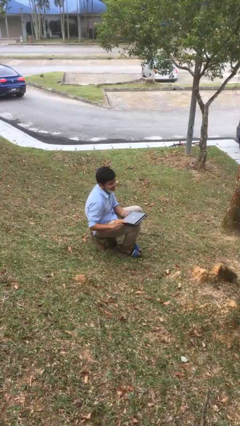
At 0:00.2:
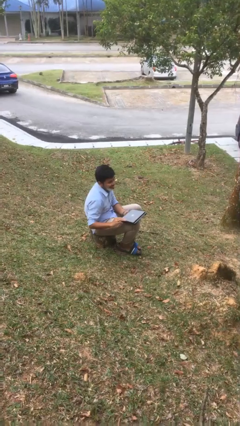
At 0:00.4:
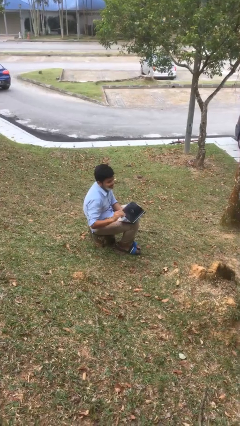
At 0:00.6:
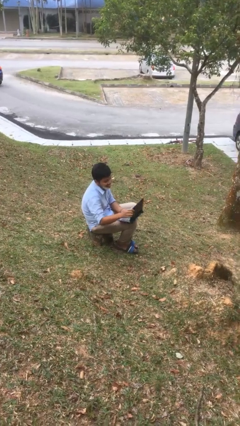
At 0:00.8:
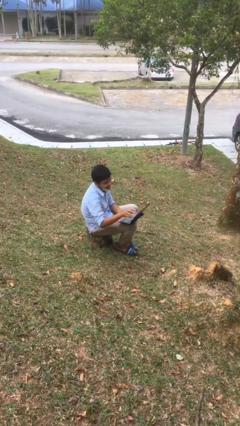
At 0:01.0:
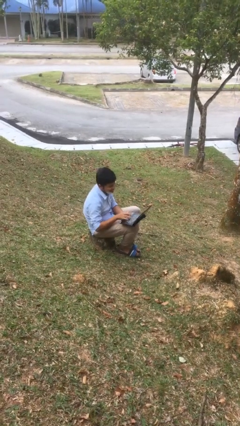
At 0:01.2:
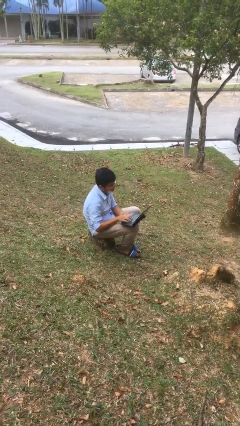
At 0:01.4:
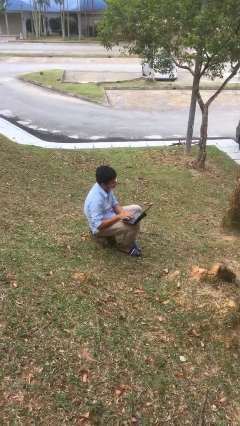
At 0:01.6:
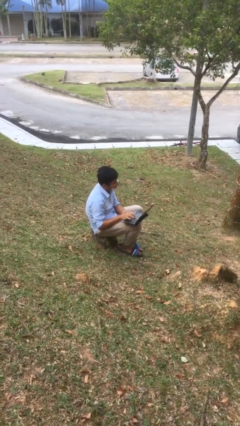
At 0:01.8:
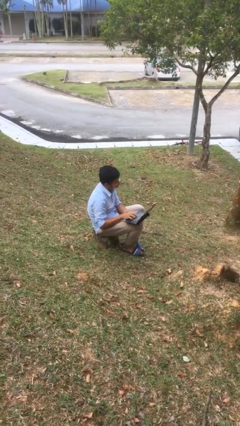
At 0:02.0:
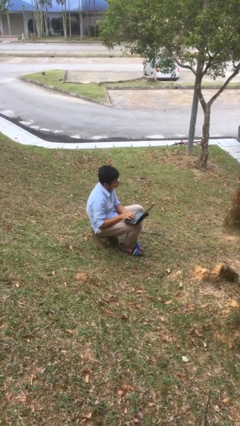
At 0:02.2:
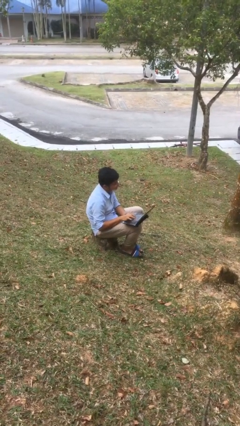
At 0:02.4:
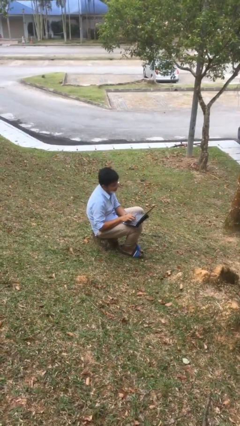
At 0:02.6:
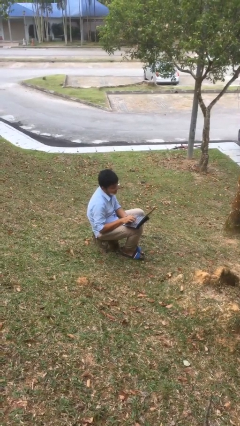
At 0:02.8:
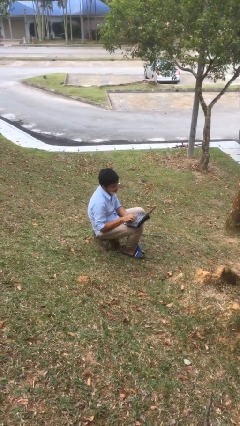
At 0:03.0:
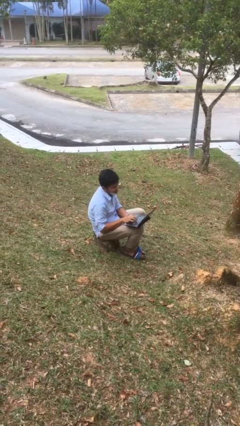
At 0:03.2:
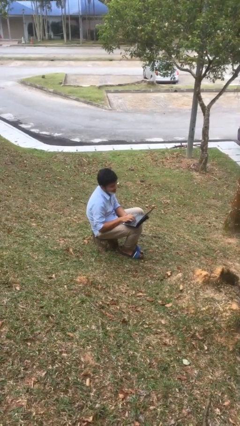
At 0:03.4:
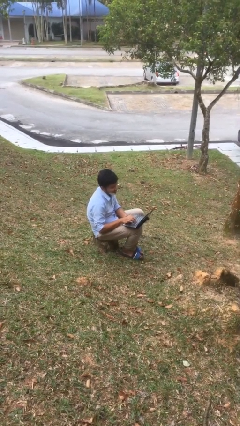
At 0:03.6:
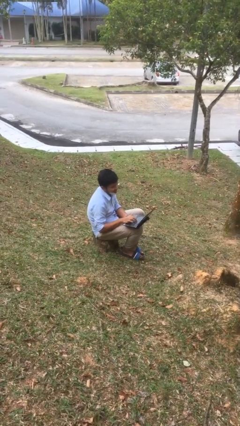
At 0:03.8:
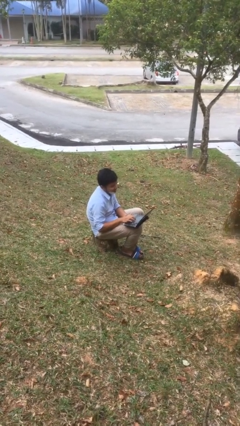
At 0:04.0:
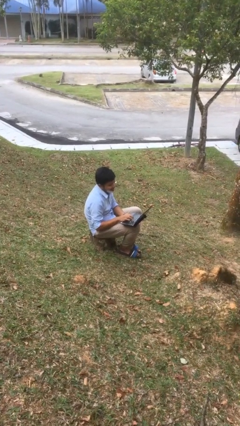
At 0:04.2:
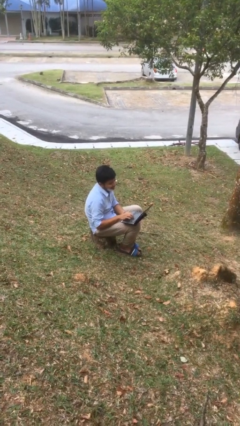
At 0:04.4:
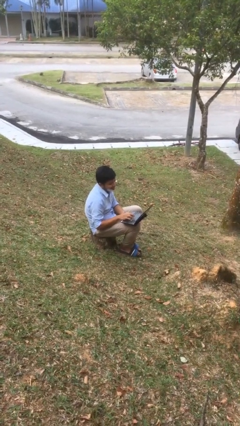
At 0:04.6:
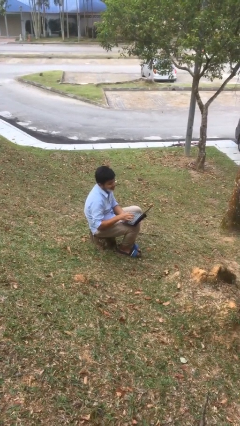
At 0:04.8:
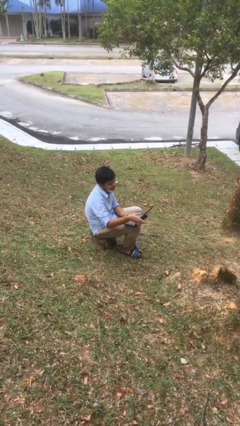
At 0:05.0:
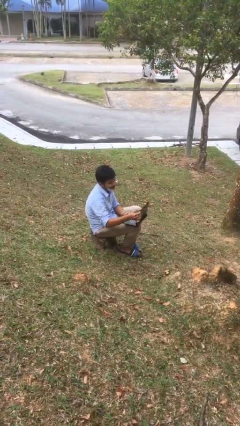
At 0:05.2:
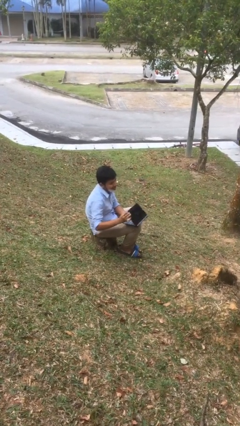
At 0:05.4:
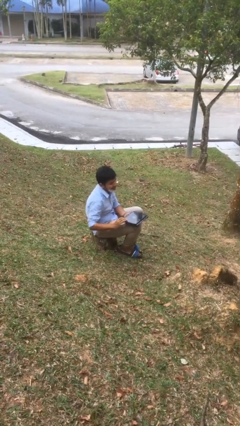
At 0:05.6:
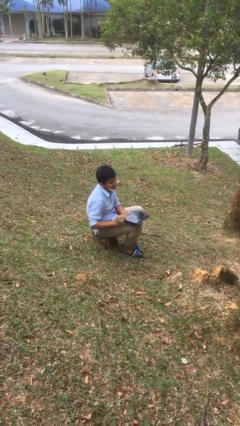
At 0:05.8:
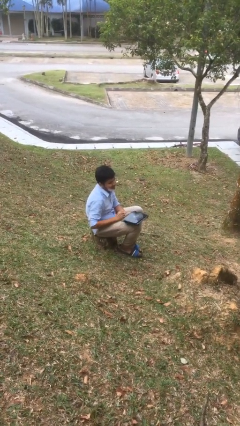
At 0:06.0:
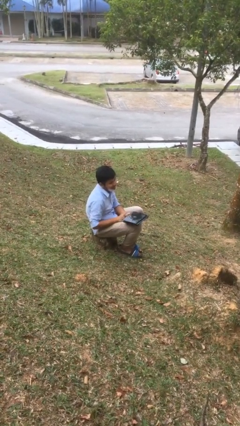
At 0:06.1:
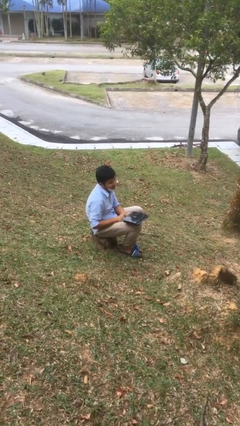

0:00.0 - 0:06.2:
person interacts with laptop

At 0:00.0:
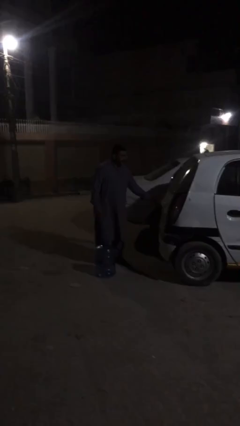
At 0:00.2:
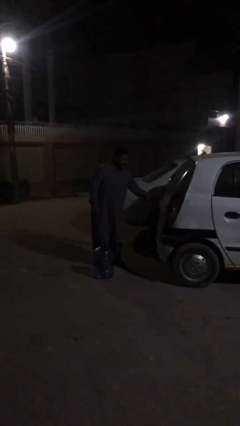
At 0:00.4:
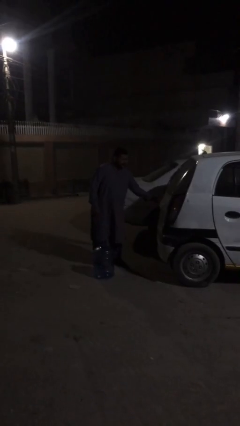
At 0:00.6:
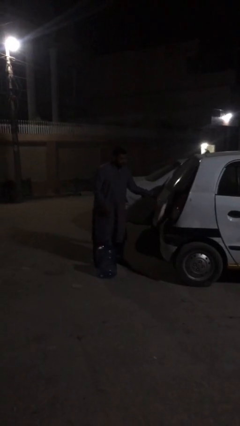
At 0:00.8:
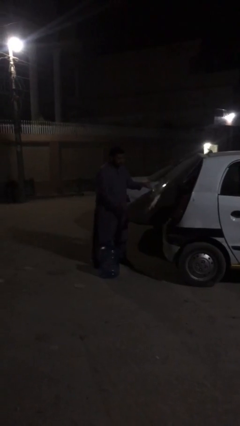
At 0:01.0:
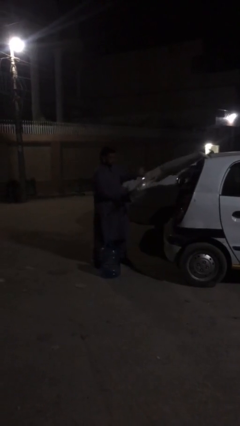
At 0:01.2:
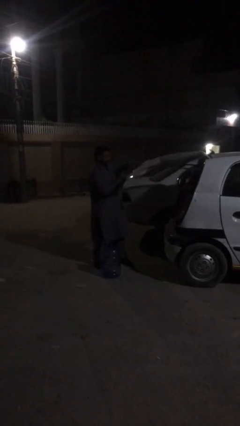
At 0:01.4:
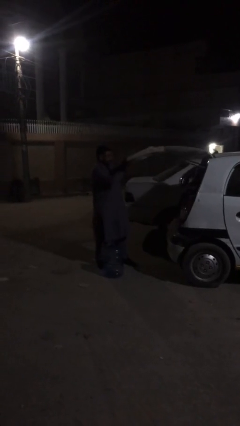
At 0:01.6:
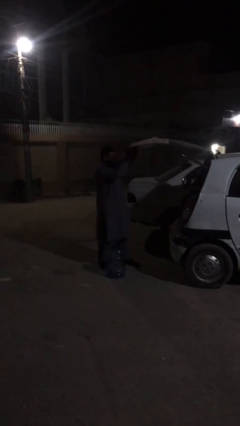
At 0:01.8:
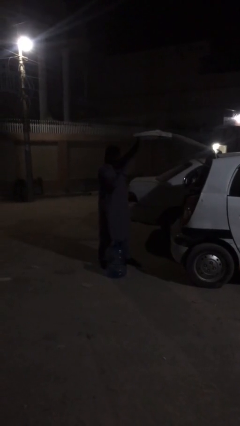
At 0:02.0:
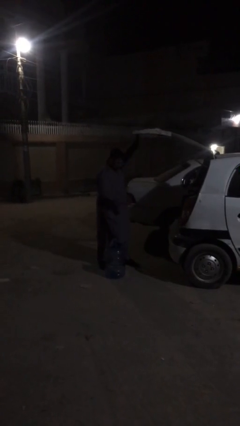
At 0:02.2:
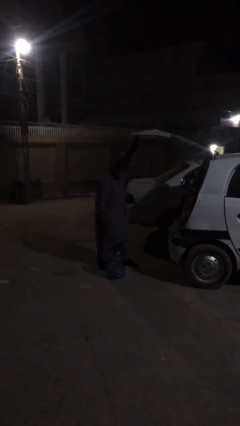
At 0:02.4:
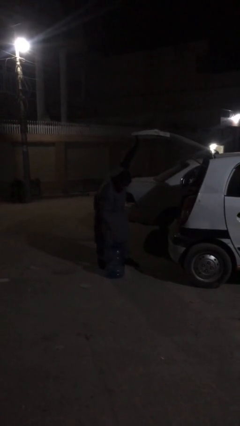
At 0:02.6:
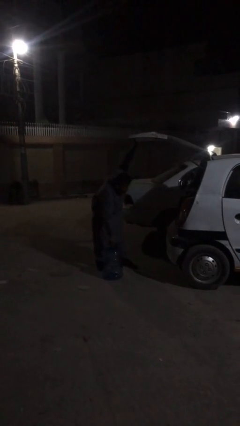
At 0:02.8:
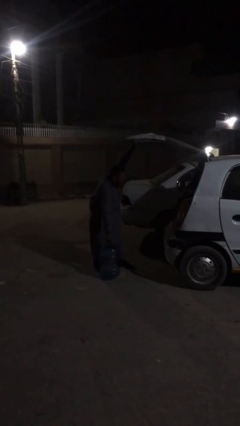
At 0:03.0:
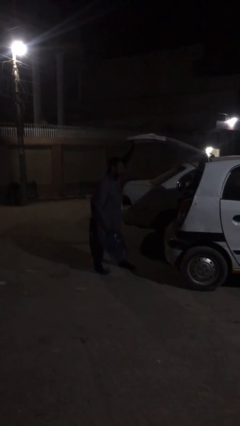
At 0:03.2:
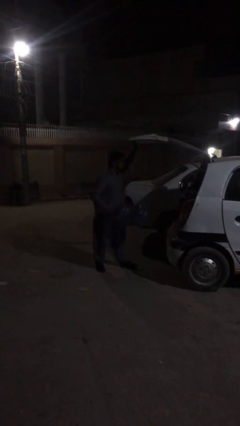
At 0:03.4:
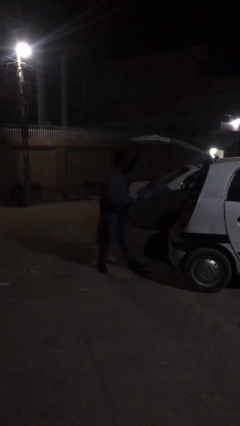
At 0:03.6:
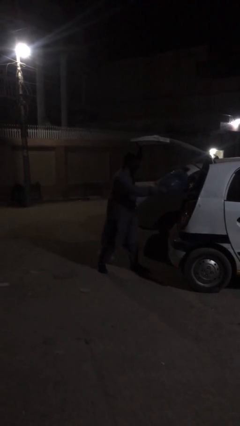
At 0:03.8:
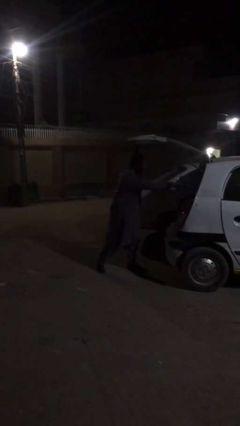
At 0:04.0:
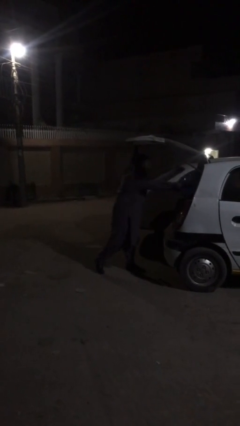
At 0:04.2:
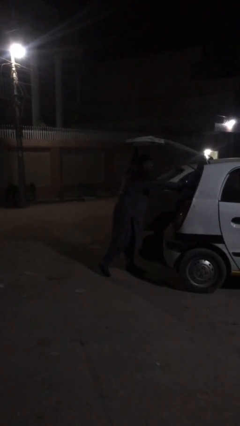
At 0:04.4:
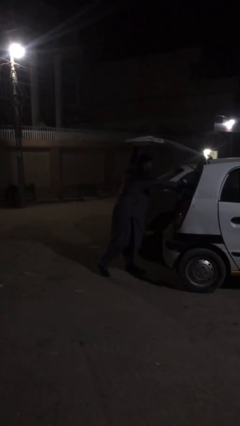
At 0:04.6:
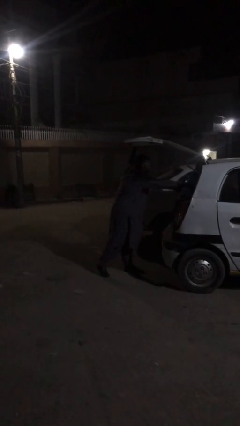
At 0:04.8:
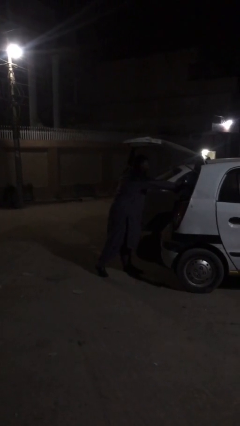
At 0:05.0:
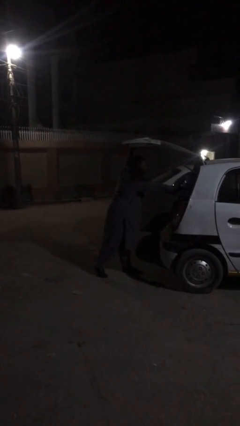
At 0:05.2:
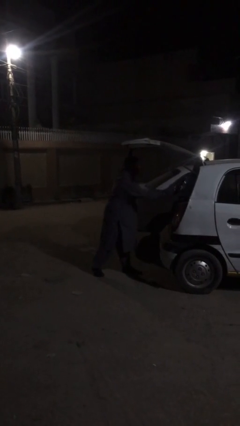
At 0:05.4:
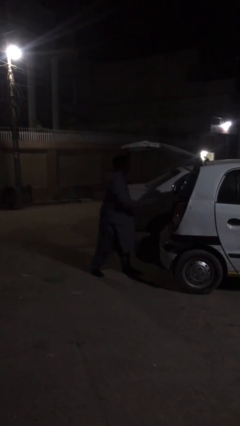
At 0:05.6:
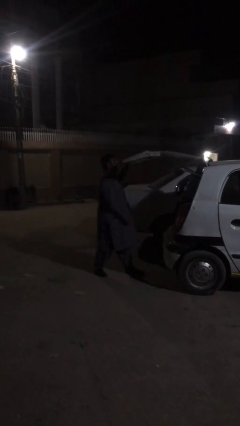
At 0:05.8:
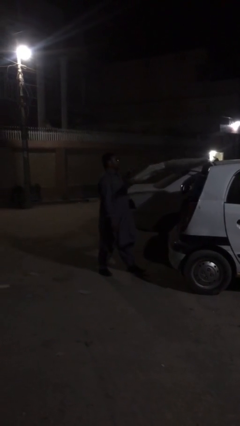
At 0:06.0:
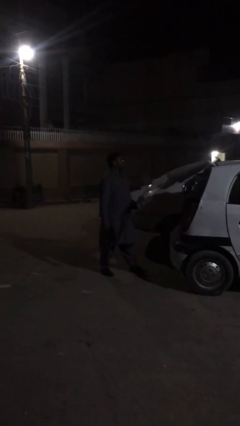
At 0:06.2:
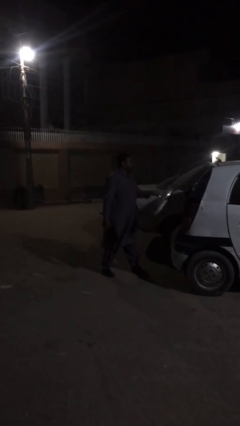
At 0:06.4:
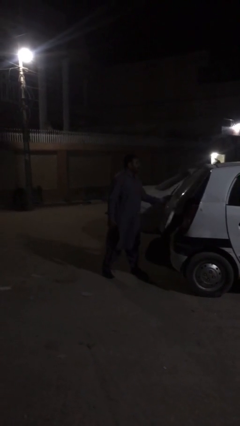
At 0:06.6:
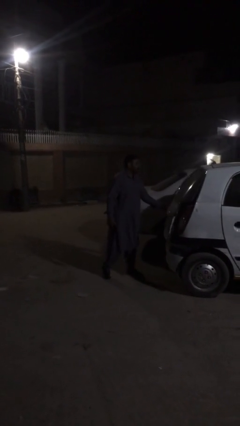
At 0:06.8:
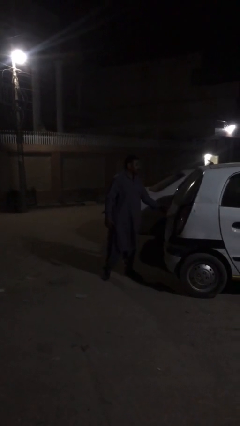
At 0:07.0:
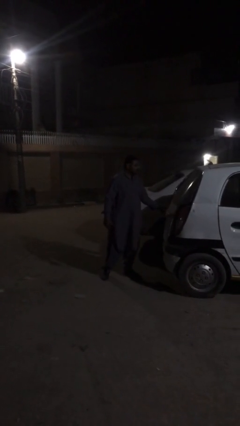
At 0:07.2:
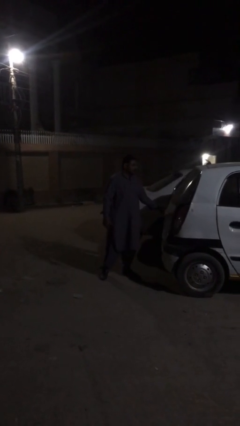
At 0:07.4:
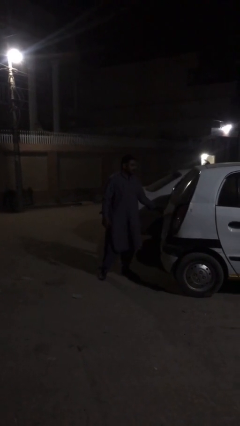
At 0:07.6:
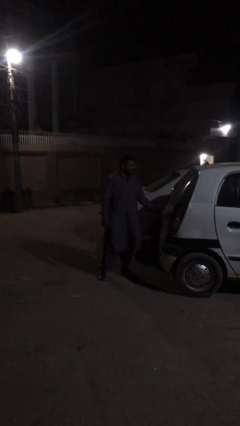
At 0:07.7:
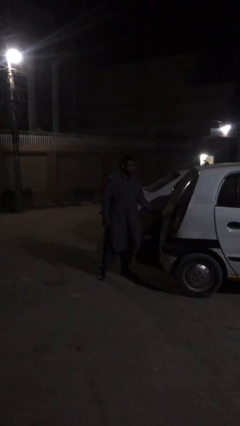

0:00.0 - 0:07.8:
person loads car

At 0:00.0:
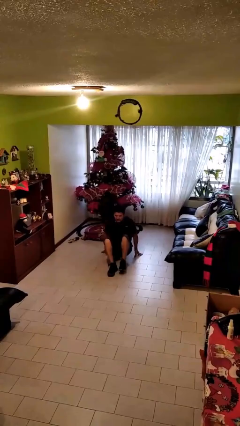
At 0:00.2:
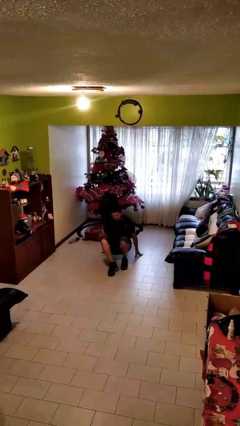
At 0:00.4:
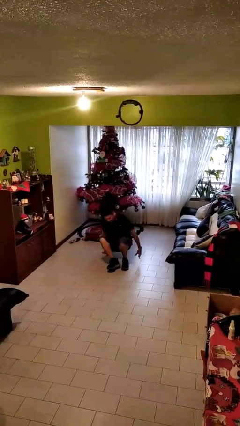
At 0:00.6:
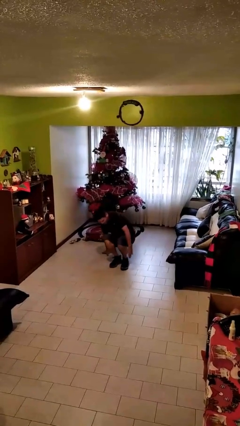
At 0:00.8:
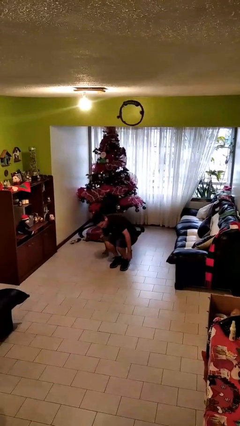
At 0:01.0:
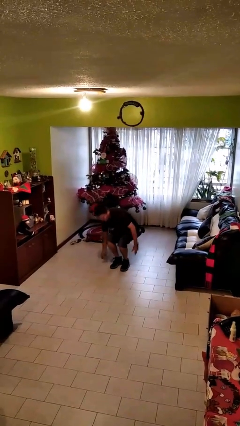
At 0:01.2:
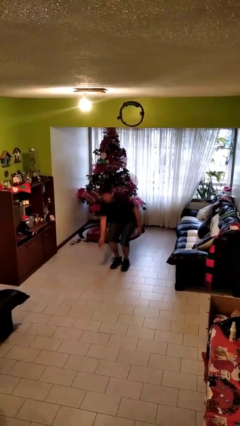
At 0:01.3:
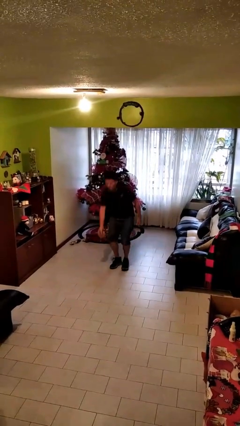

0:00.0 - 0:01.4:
person stands up

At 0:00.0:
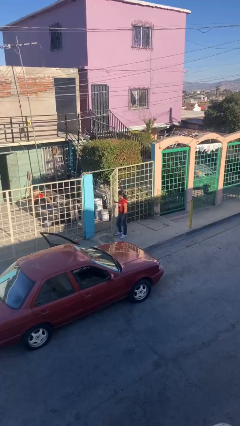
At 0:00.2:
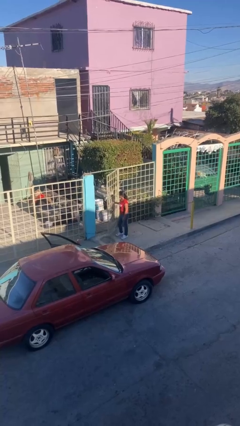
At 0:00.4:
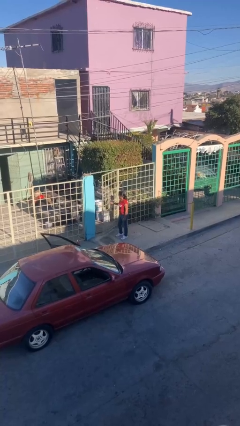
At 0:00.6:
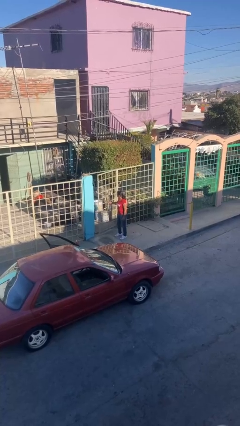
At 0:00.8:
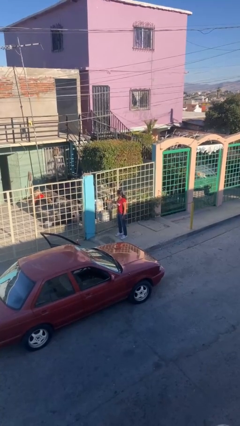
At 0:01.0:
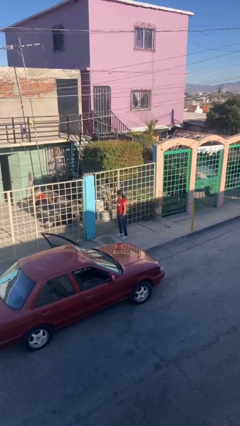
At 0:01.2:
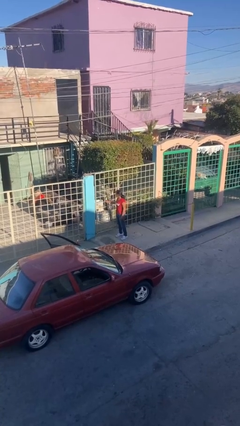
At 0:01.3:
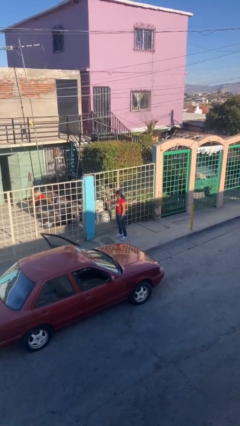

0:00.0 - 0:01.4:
person closes facility door

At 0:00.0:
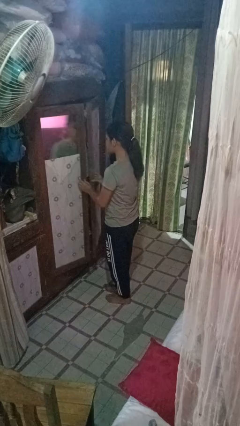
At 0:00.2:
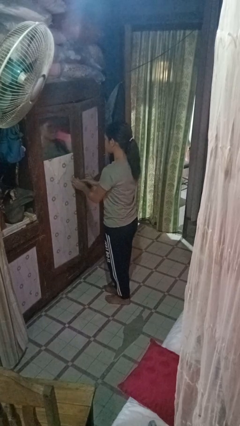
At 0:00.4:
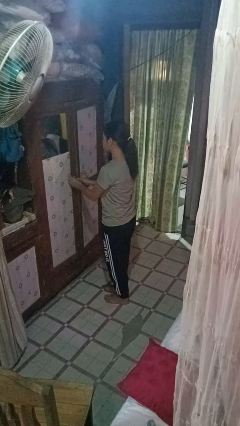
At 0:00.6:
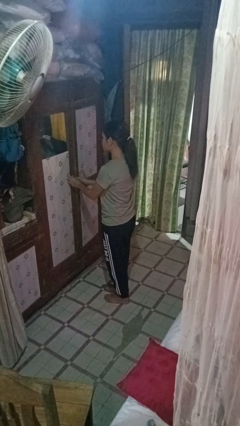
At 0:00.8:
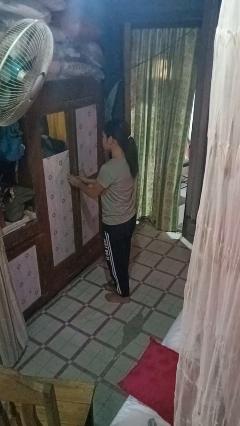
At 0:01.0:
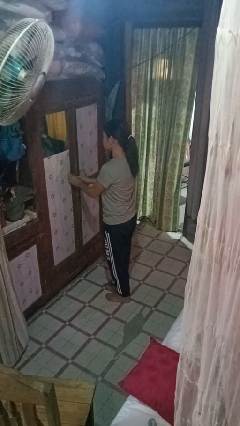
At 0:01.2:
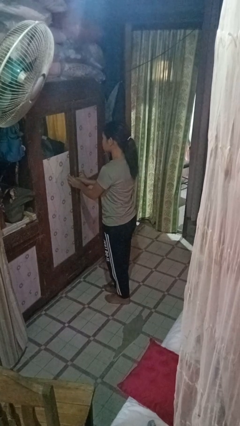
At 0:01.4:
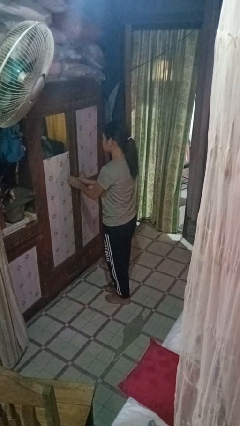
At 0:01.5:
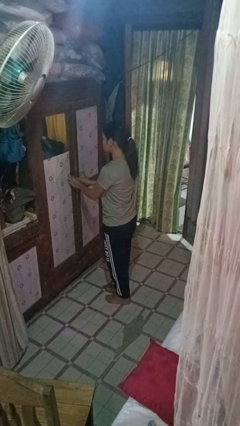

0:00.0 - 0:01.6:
person closes closet door
